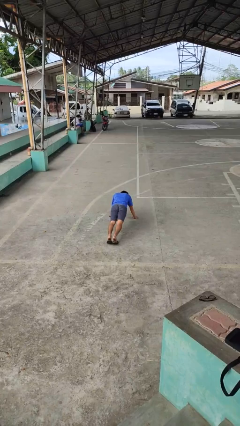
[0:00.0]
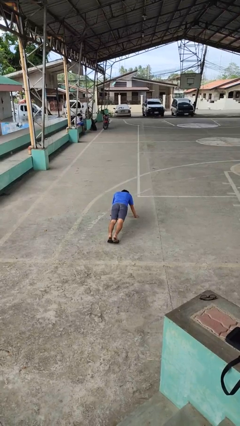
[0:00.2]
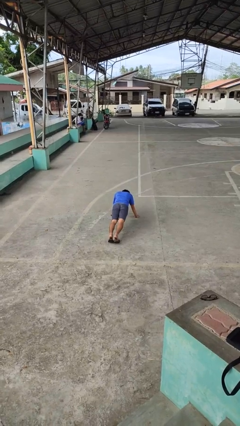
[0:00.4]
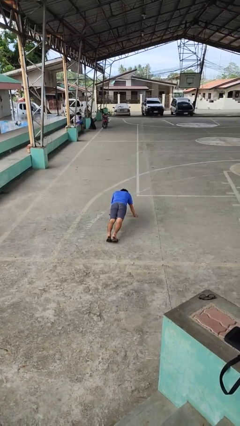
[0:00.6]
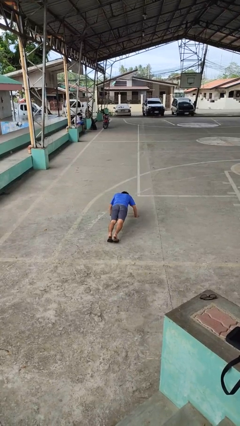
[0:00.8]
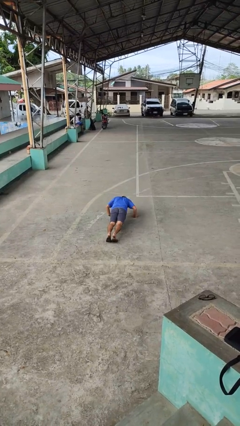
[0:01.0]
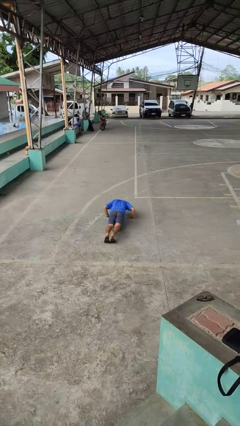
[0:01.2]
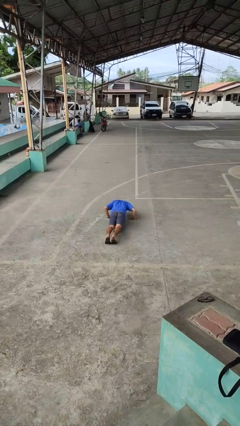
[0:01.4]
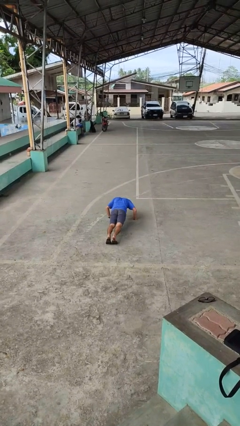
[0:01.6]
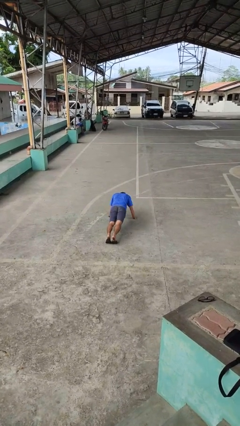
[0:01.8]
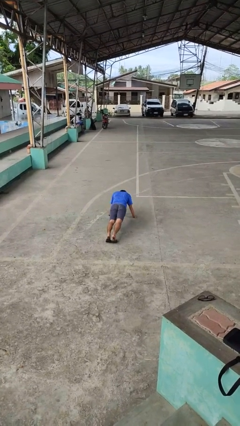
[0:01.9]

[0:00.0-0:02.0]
person exercises with pushup

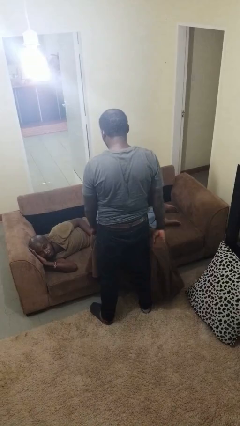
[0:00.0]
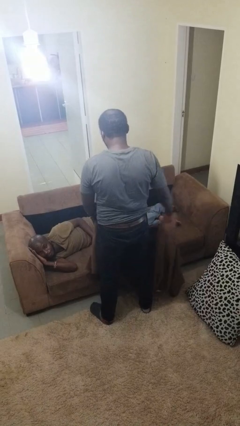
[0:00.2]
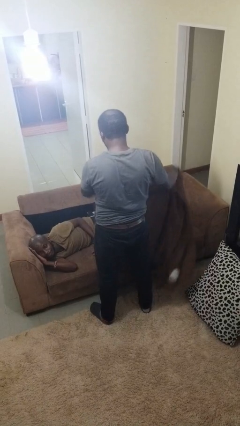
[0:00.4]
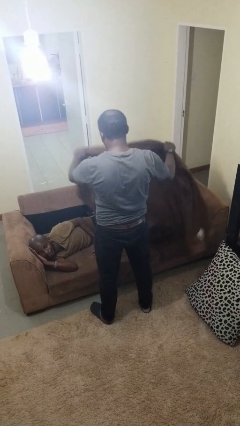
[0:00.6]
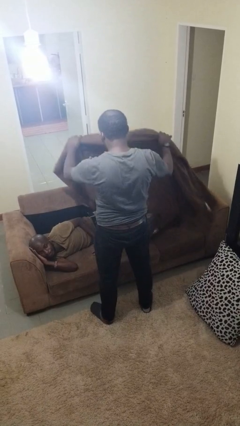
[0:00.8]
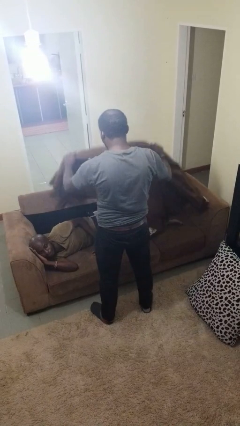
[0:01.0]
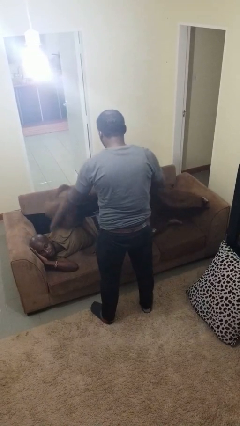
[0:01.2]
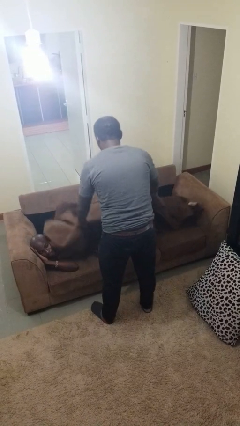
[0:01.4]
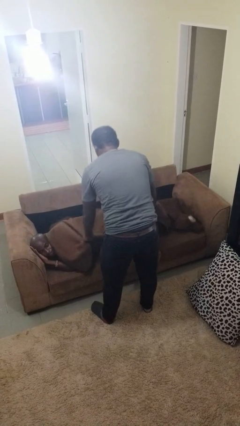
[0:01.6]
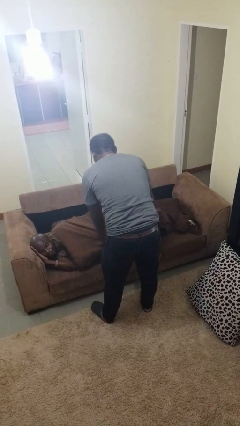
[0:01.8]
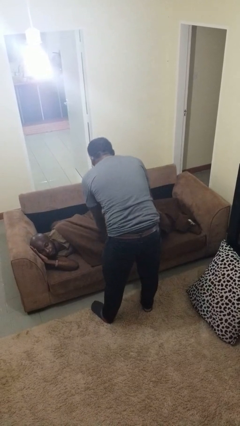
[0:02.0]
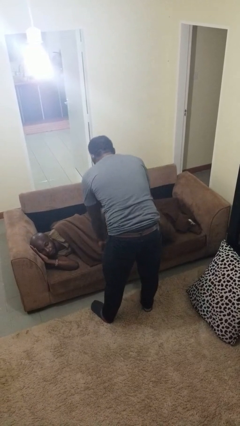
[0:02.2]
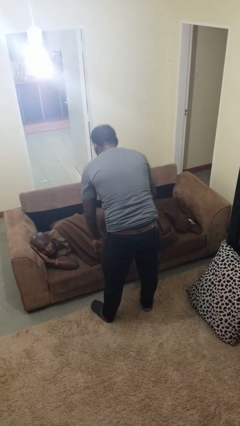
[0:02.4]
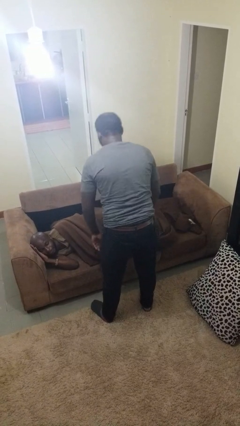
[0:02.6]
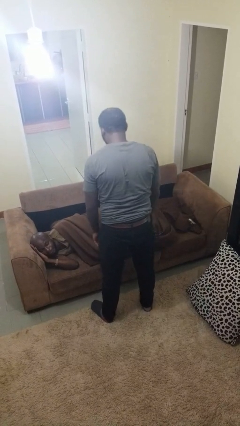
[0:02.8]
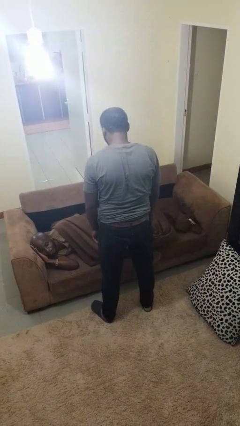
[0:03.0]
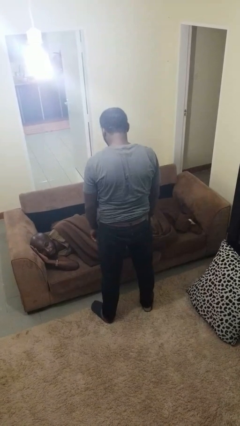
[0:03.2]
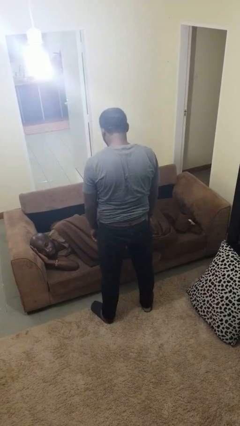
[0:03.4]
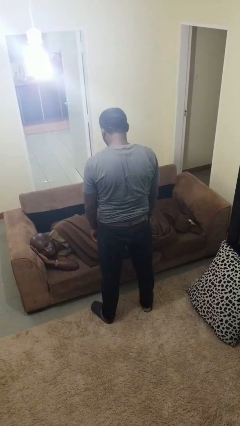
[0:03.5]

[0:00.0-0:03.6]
person covers friend with blanket

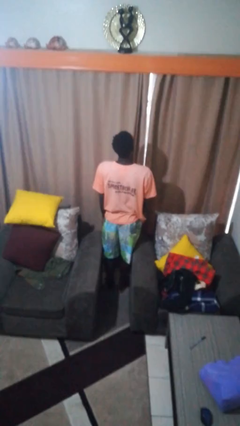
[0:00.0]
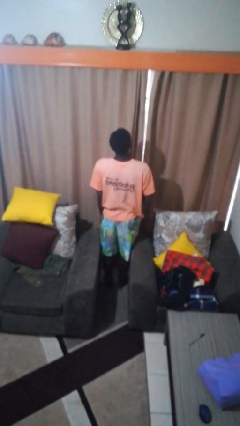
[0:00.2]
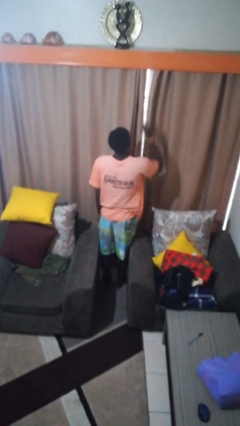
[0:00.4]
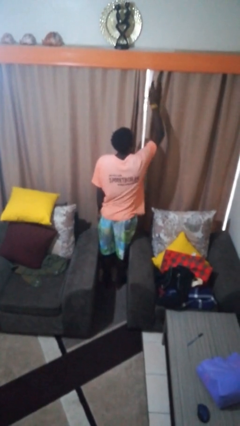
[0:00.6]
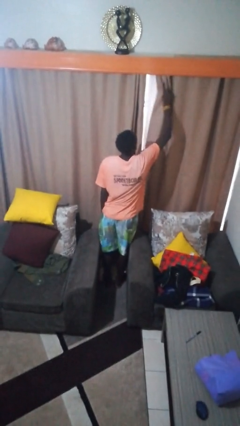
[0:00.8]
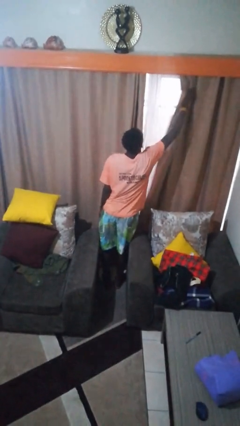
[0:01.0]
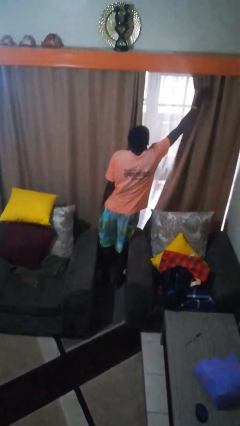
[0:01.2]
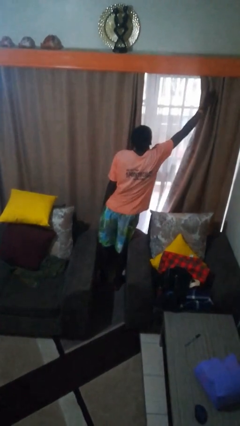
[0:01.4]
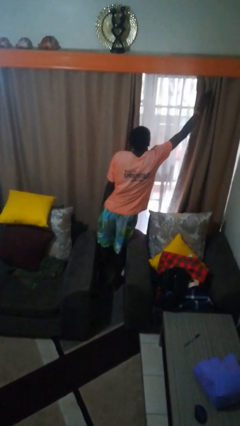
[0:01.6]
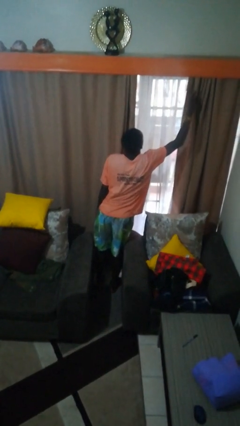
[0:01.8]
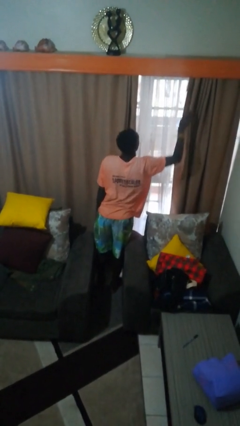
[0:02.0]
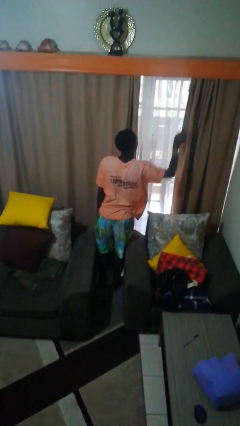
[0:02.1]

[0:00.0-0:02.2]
person opens curtains

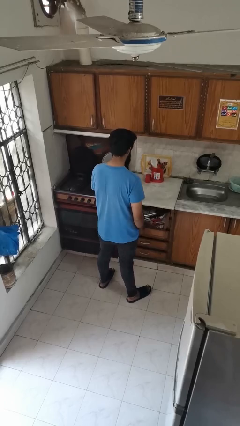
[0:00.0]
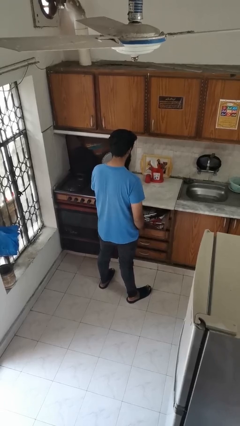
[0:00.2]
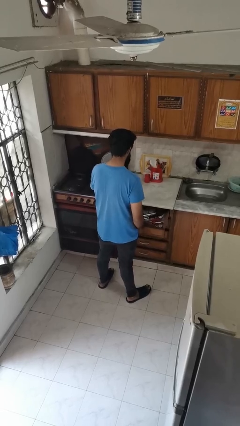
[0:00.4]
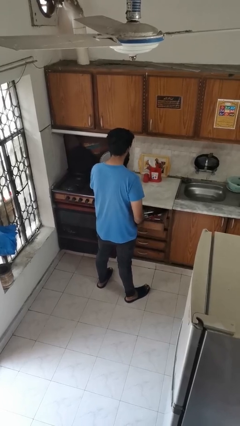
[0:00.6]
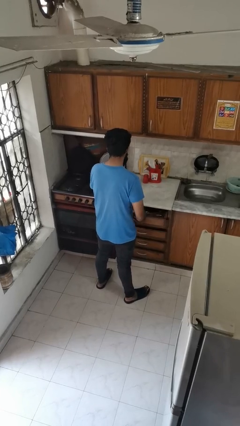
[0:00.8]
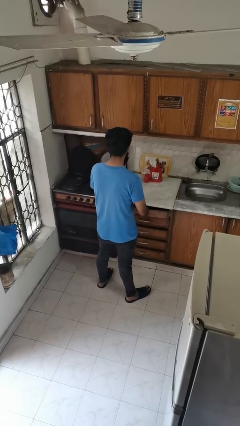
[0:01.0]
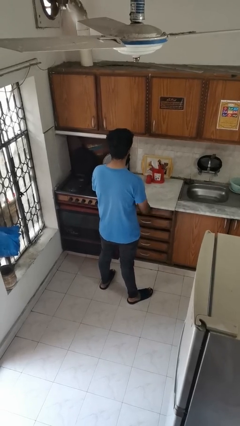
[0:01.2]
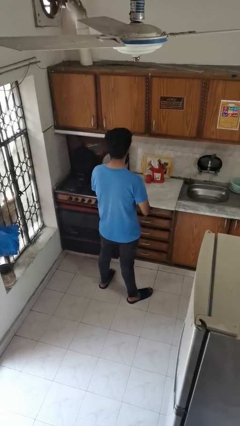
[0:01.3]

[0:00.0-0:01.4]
person closes kitchen drawer

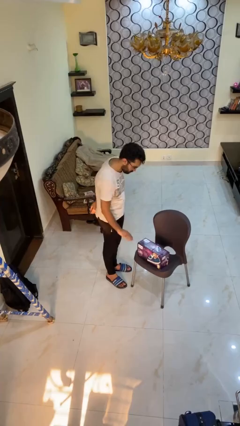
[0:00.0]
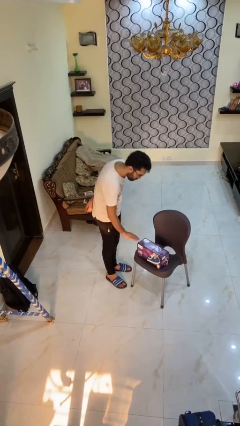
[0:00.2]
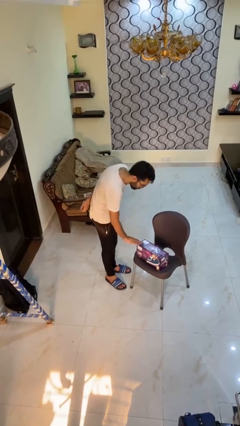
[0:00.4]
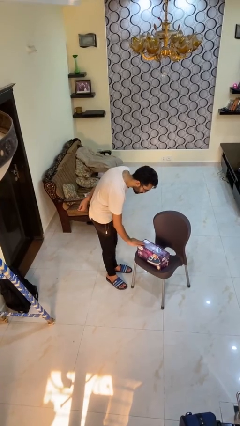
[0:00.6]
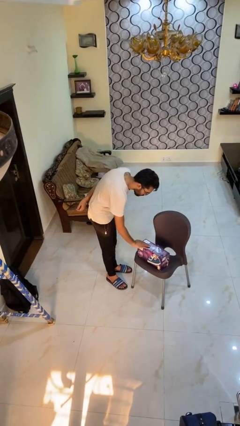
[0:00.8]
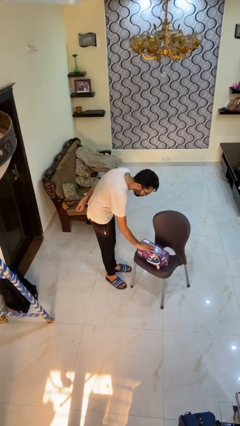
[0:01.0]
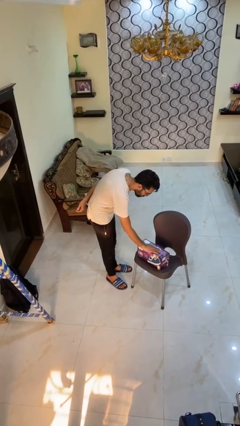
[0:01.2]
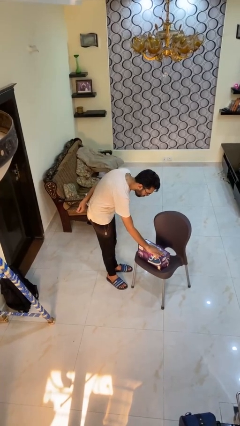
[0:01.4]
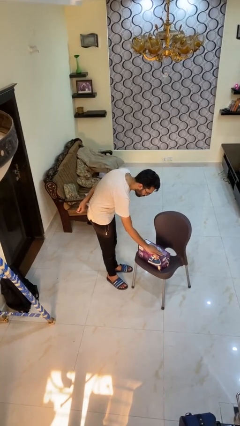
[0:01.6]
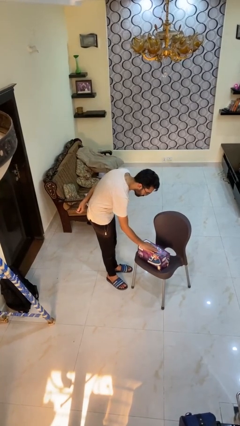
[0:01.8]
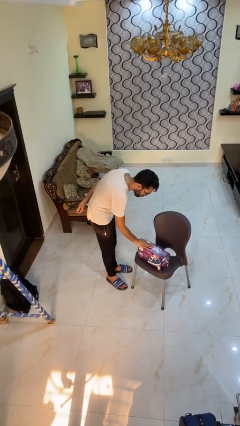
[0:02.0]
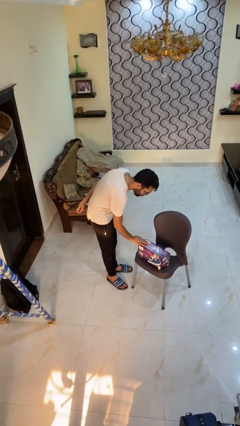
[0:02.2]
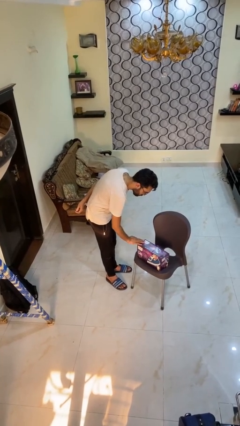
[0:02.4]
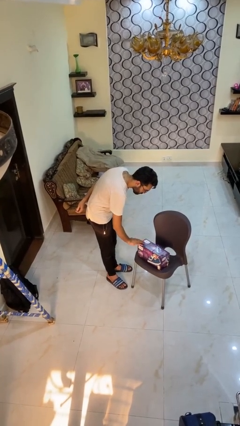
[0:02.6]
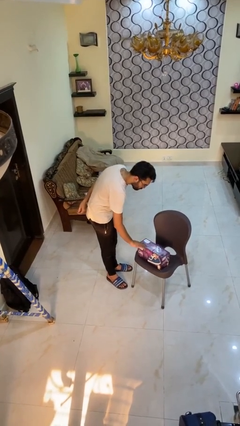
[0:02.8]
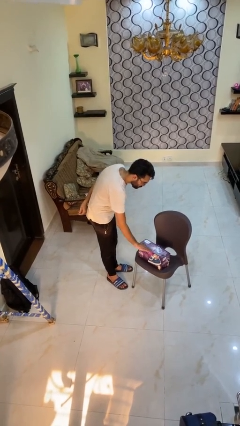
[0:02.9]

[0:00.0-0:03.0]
person waves hand over object

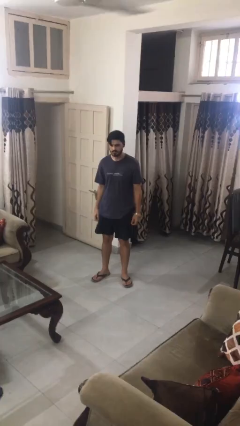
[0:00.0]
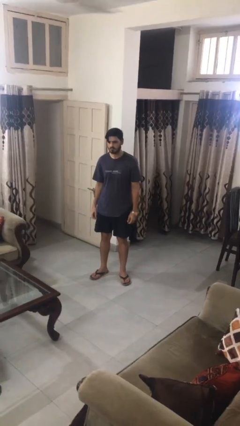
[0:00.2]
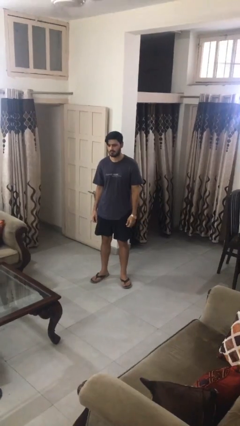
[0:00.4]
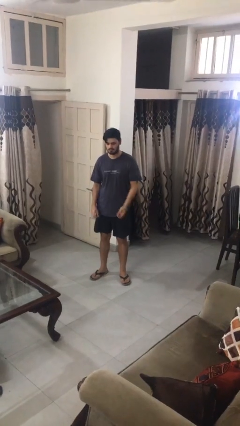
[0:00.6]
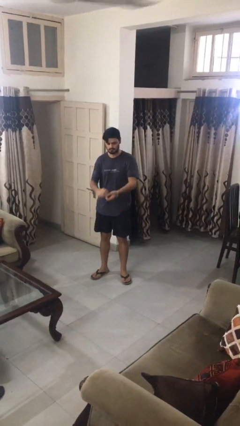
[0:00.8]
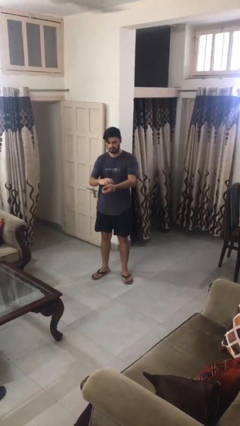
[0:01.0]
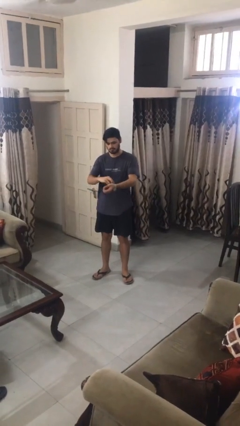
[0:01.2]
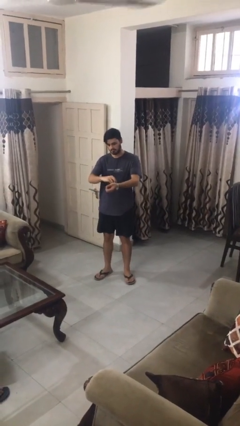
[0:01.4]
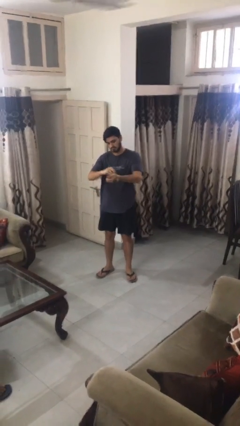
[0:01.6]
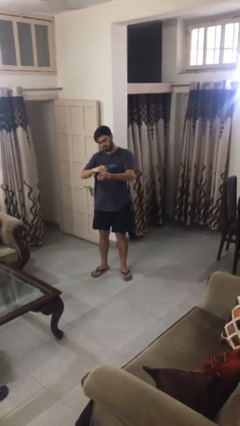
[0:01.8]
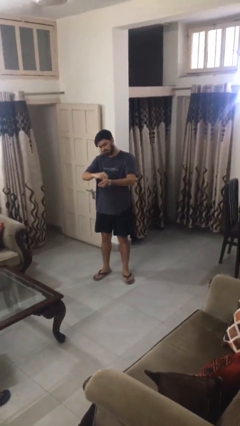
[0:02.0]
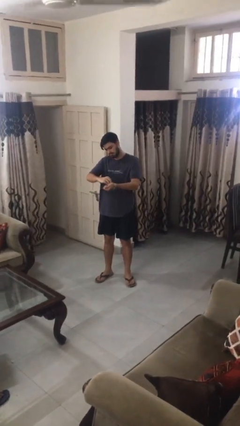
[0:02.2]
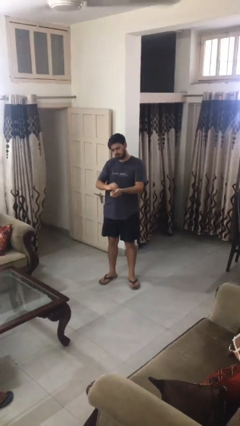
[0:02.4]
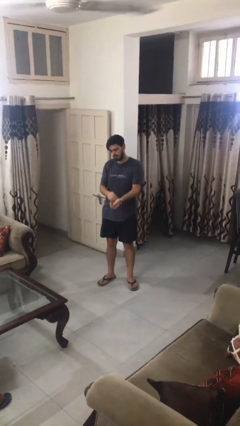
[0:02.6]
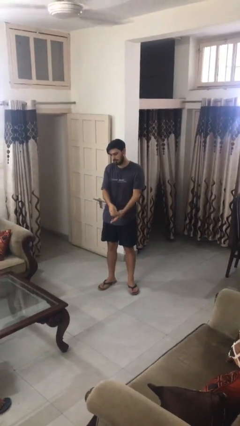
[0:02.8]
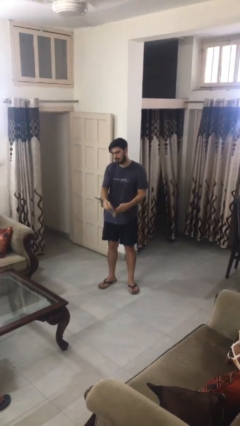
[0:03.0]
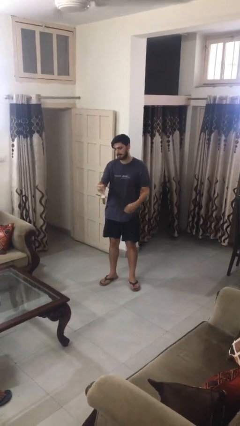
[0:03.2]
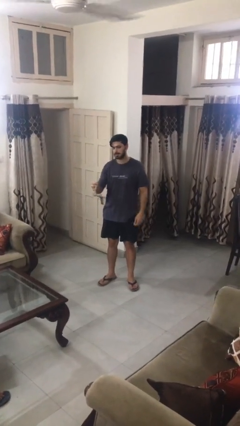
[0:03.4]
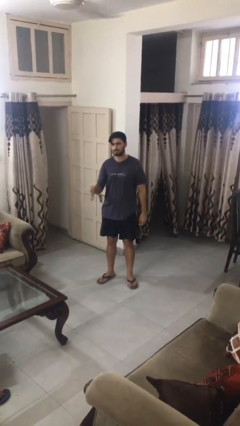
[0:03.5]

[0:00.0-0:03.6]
person takes off wristwatch

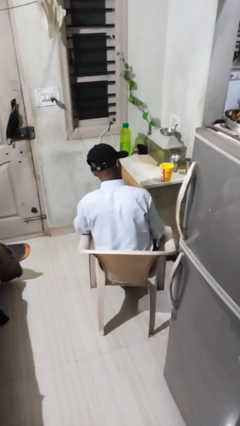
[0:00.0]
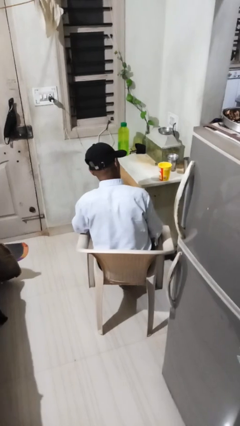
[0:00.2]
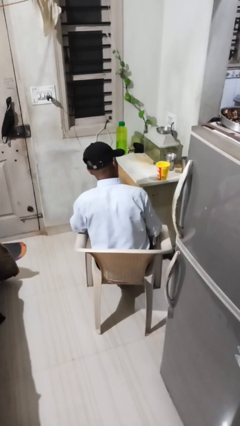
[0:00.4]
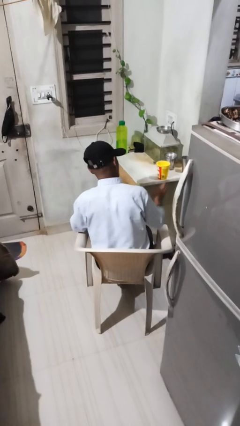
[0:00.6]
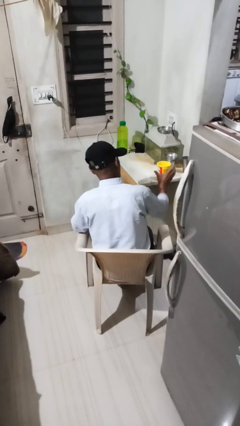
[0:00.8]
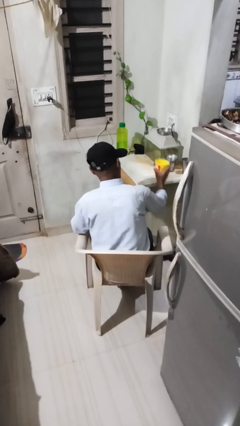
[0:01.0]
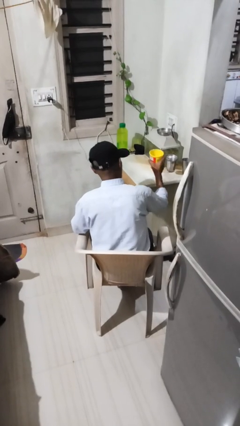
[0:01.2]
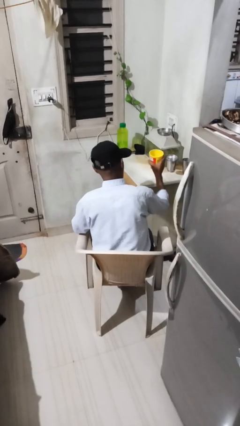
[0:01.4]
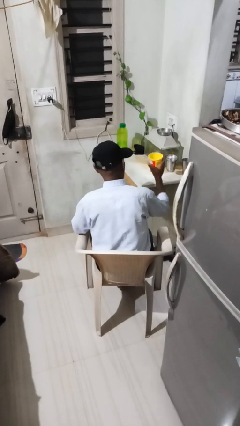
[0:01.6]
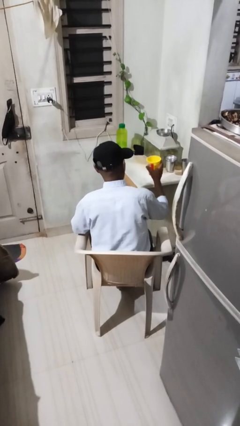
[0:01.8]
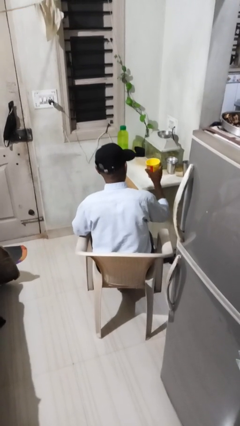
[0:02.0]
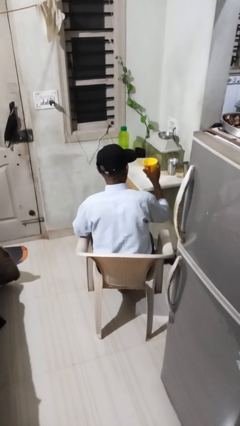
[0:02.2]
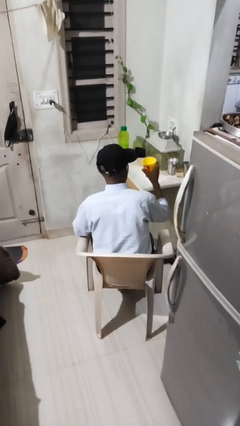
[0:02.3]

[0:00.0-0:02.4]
person picks up object from table
